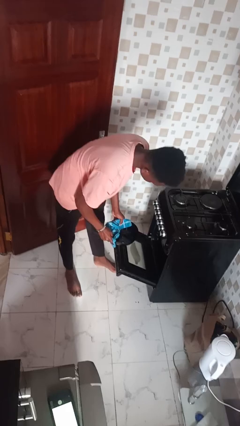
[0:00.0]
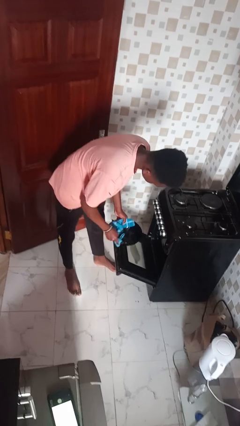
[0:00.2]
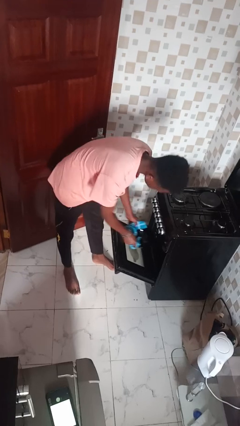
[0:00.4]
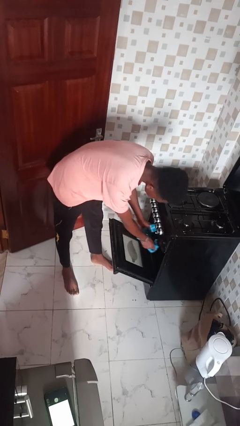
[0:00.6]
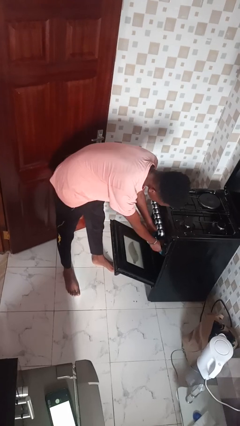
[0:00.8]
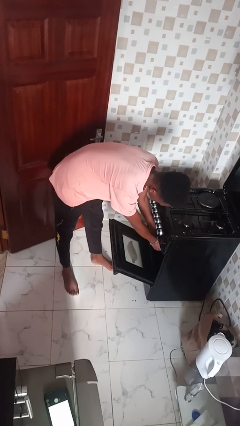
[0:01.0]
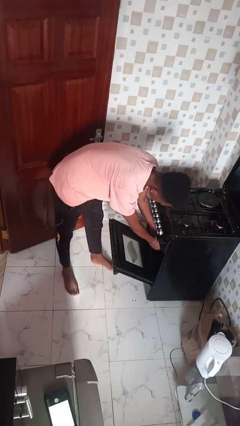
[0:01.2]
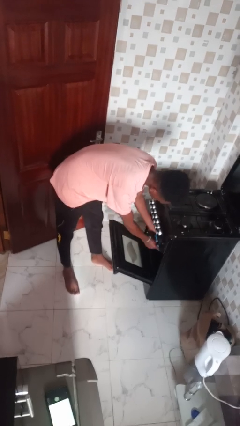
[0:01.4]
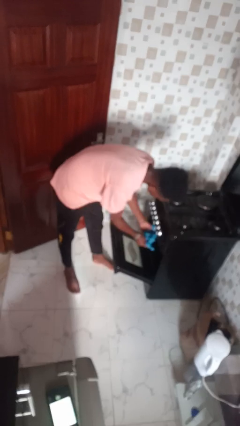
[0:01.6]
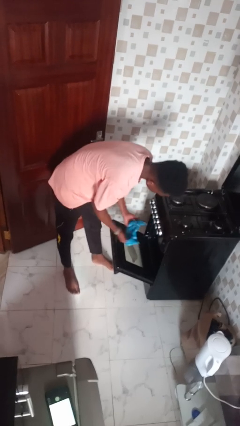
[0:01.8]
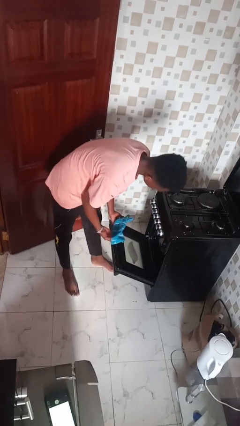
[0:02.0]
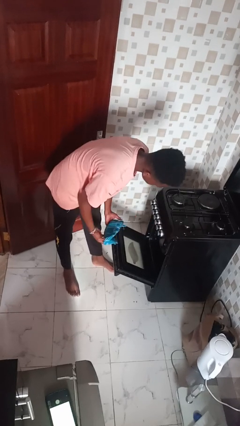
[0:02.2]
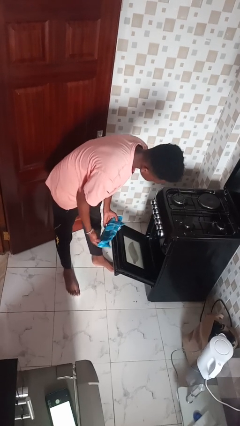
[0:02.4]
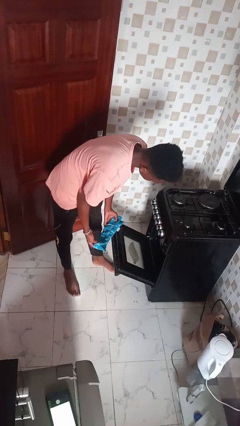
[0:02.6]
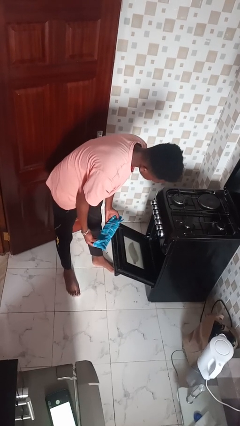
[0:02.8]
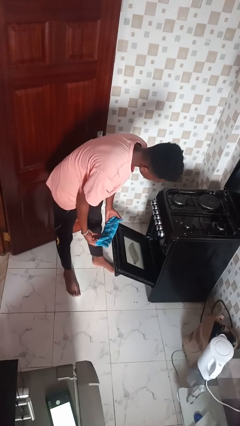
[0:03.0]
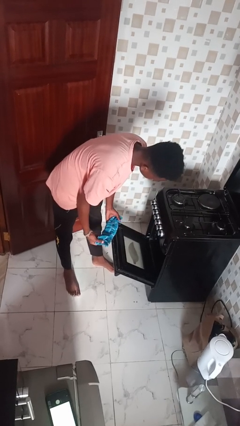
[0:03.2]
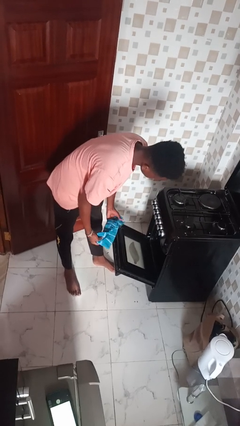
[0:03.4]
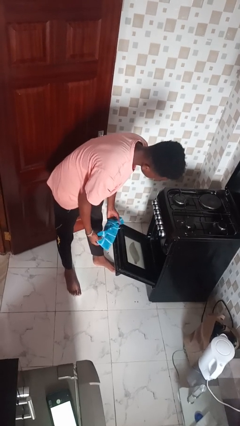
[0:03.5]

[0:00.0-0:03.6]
person puts object into oven

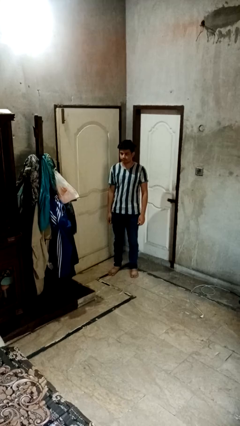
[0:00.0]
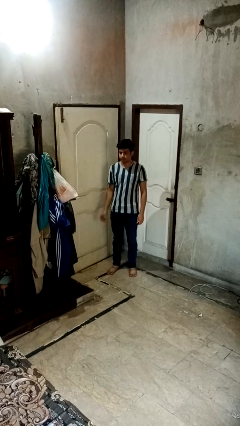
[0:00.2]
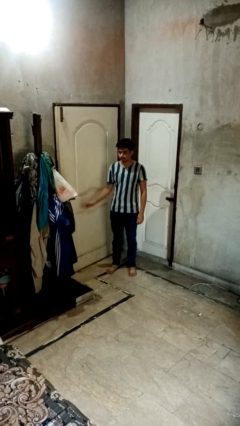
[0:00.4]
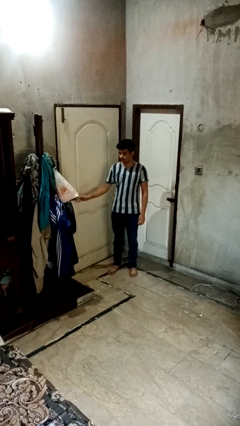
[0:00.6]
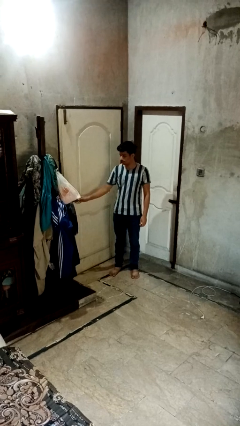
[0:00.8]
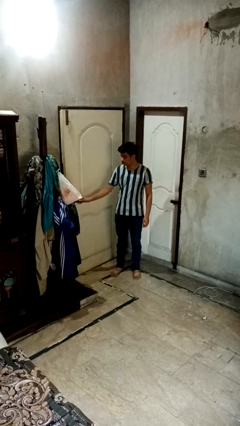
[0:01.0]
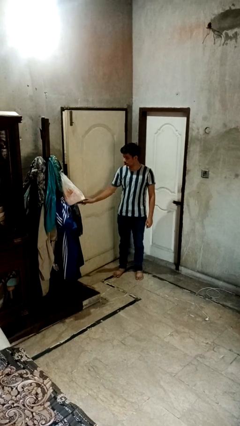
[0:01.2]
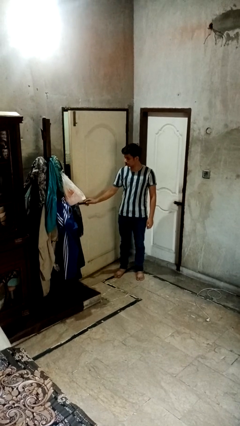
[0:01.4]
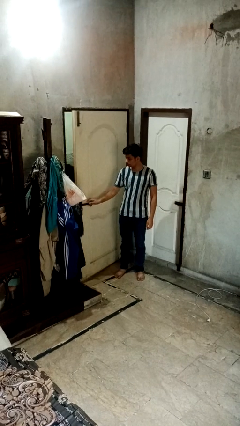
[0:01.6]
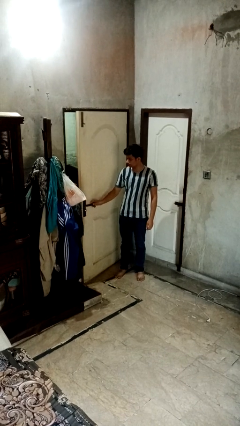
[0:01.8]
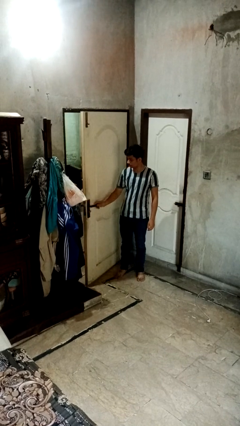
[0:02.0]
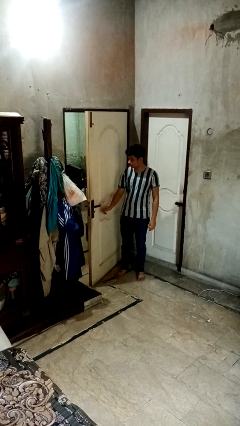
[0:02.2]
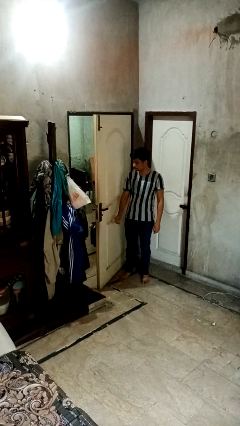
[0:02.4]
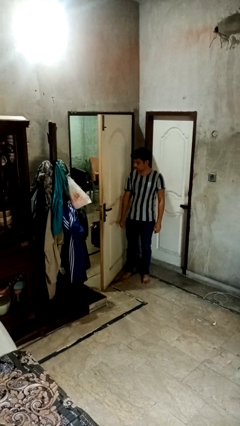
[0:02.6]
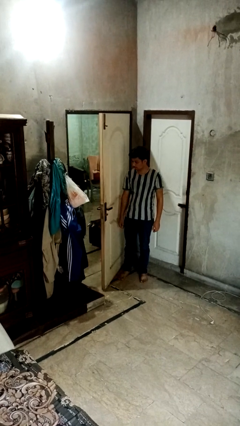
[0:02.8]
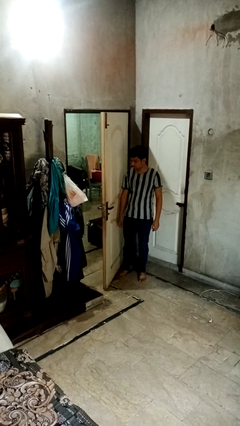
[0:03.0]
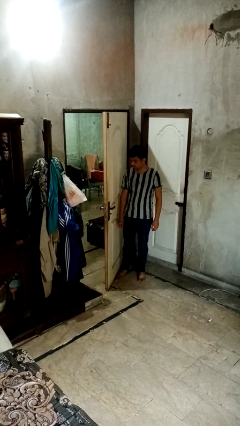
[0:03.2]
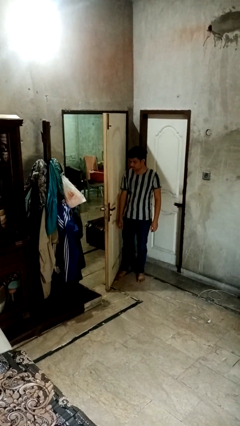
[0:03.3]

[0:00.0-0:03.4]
person opens facility door

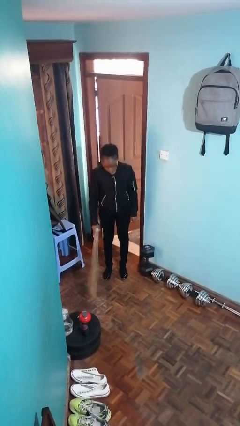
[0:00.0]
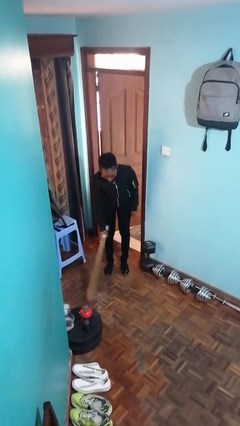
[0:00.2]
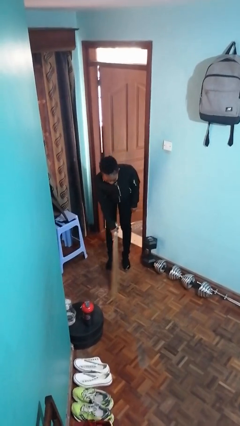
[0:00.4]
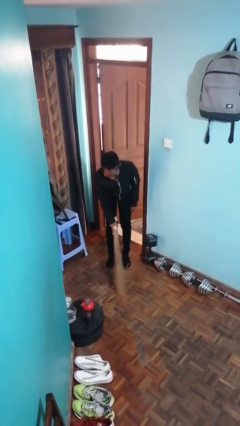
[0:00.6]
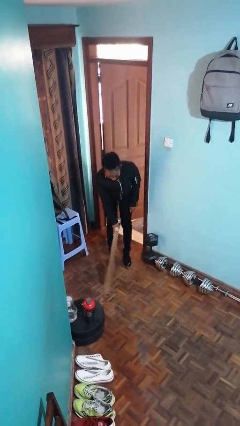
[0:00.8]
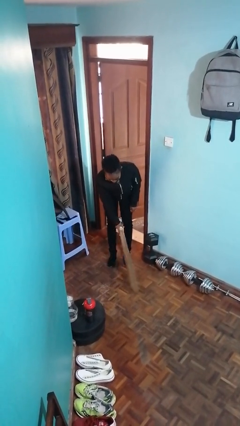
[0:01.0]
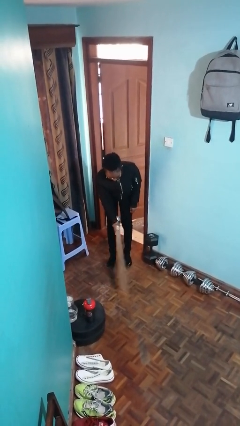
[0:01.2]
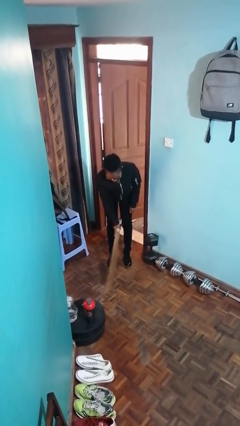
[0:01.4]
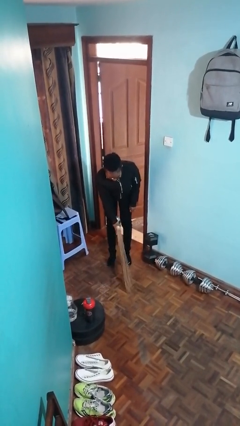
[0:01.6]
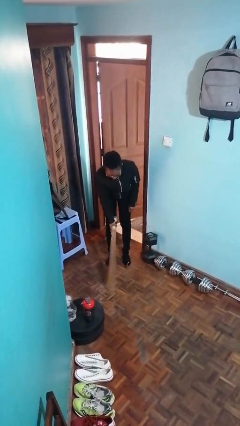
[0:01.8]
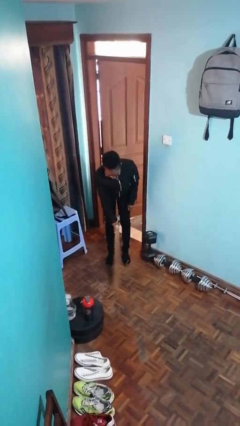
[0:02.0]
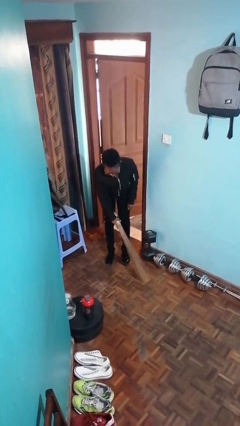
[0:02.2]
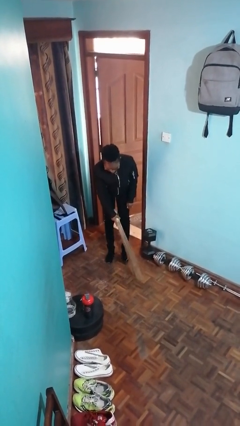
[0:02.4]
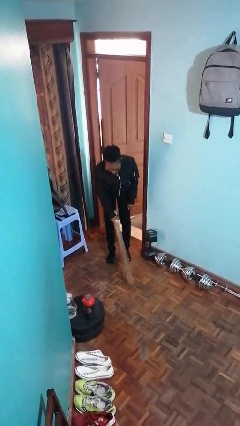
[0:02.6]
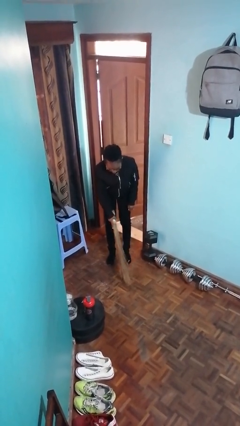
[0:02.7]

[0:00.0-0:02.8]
person sweeps floor

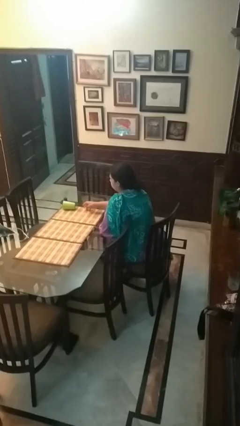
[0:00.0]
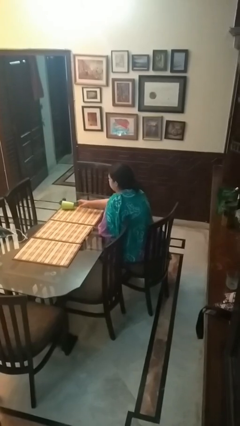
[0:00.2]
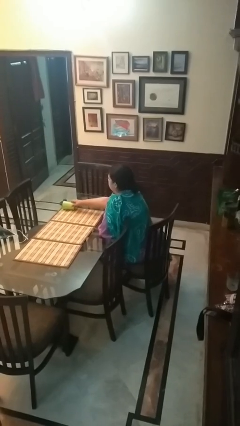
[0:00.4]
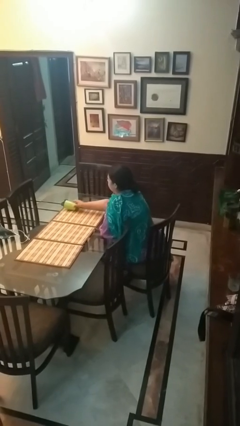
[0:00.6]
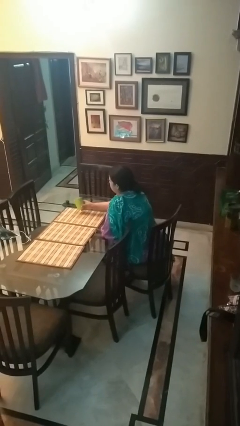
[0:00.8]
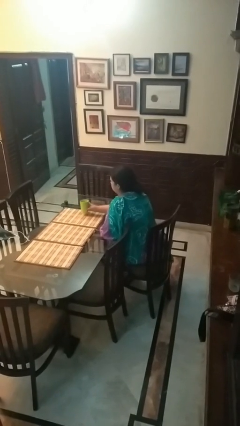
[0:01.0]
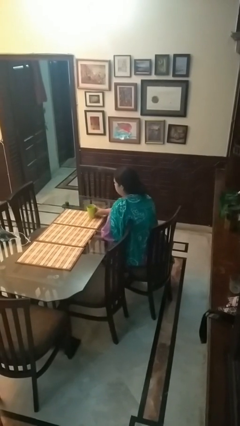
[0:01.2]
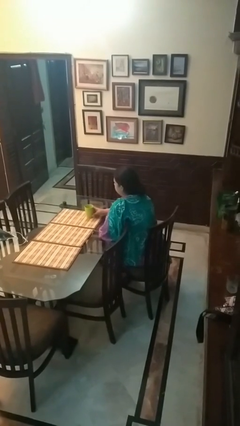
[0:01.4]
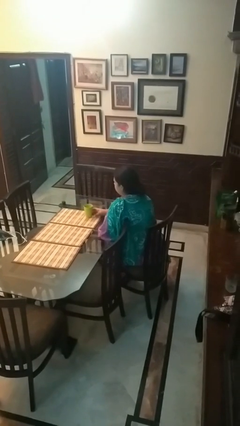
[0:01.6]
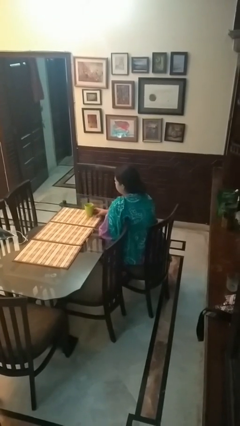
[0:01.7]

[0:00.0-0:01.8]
person sets upright glass

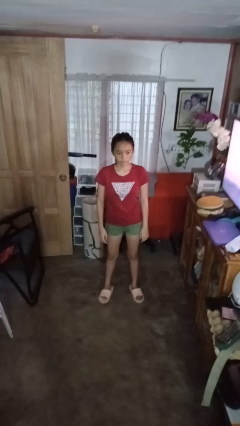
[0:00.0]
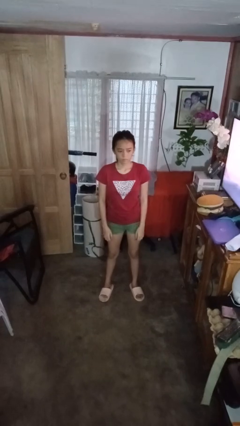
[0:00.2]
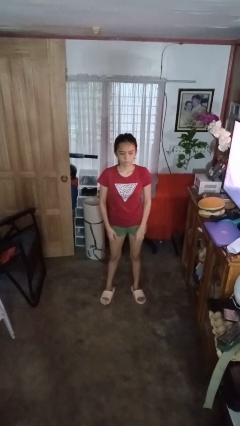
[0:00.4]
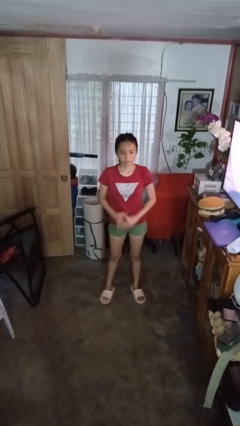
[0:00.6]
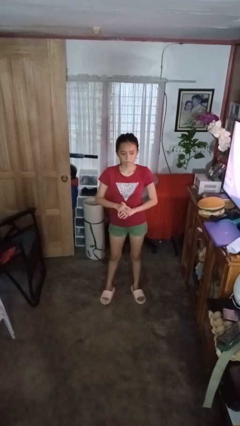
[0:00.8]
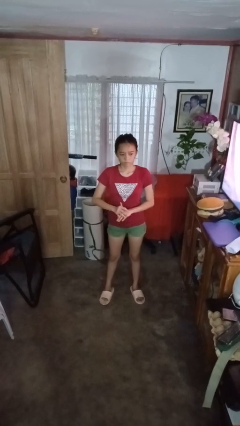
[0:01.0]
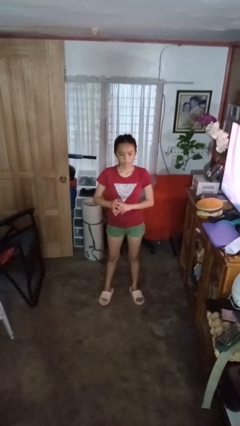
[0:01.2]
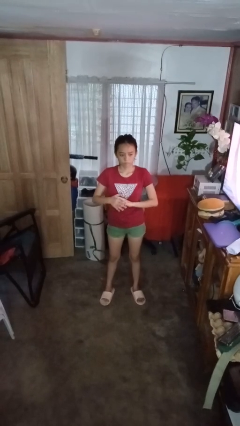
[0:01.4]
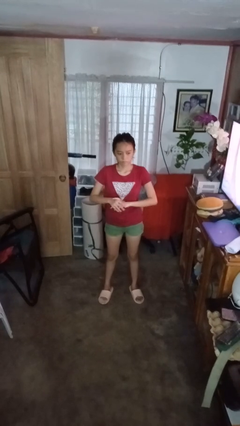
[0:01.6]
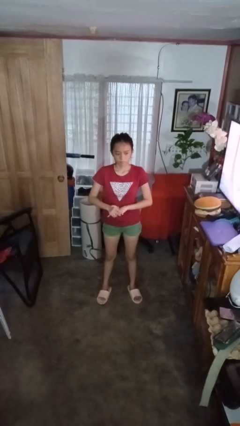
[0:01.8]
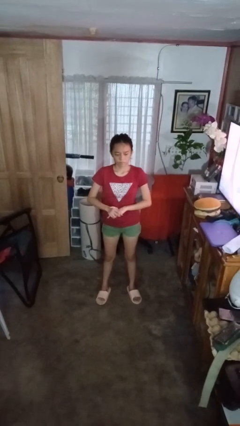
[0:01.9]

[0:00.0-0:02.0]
person cracks knuckles

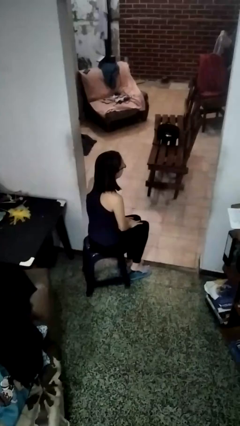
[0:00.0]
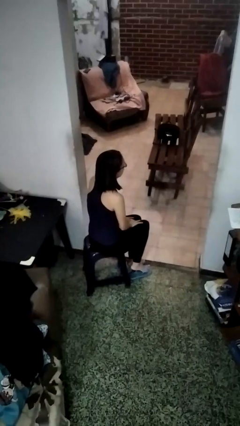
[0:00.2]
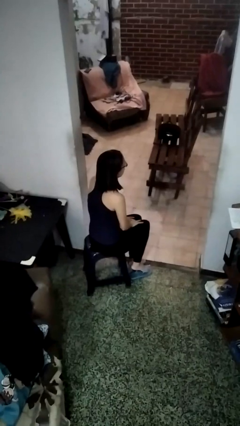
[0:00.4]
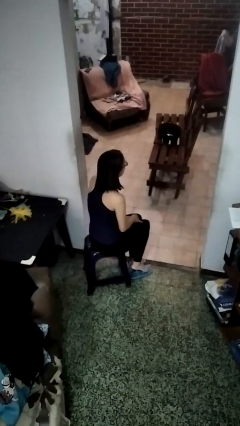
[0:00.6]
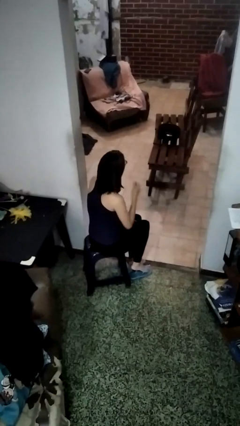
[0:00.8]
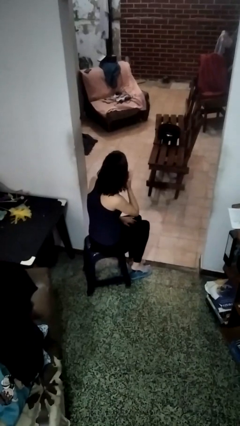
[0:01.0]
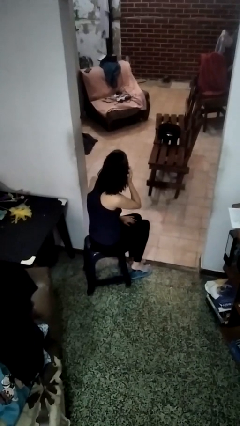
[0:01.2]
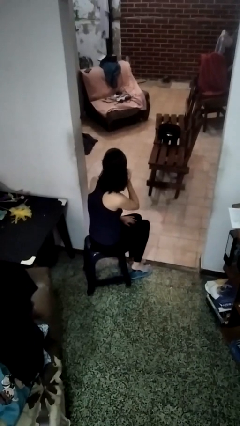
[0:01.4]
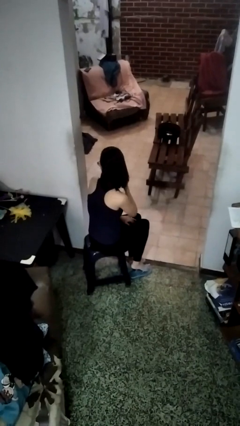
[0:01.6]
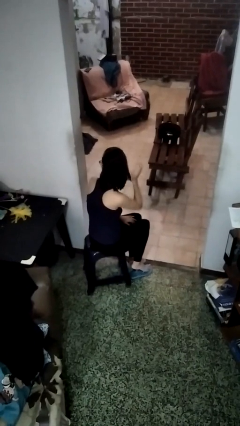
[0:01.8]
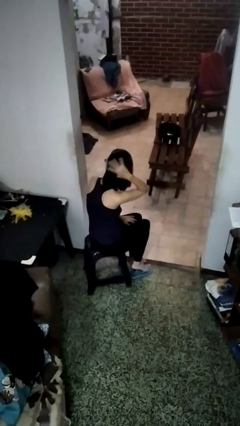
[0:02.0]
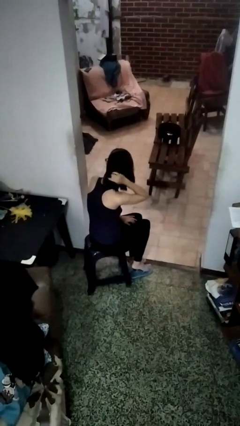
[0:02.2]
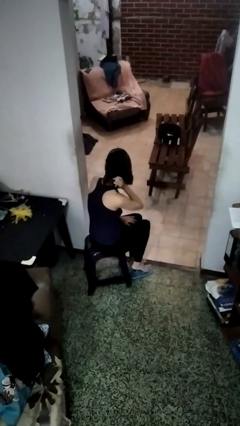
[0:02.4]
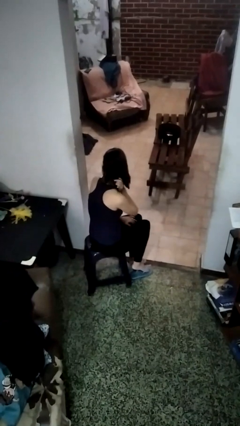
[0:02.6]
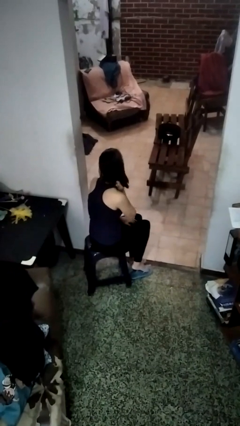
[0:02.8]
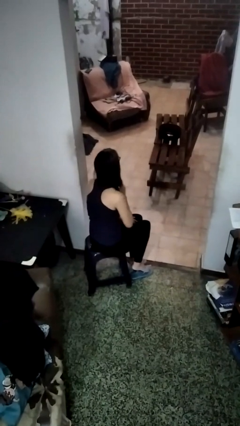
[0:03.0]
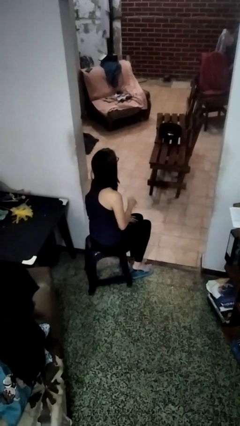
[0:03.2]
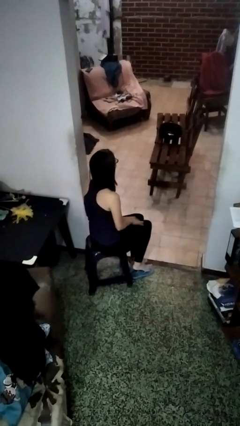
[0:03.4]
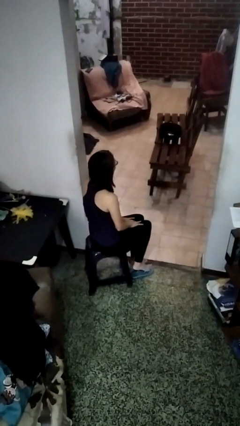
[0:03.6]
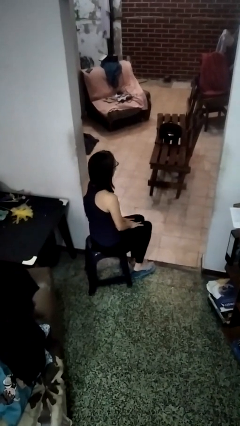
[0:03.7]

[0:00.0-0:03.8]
person strokes hair
